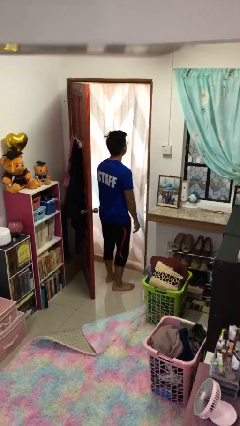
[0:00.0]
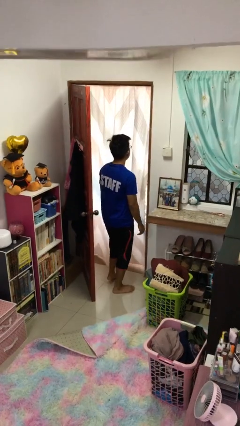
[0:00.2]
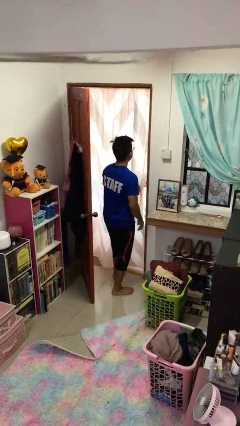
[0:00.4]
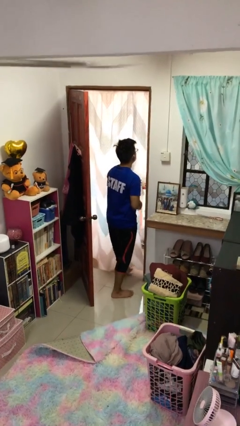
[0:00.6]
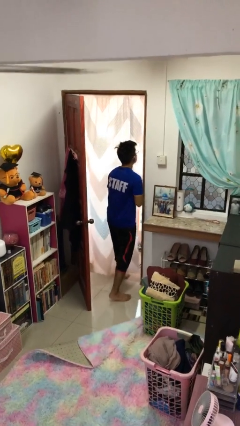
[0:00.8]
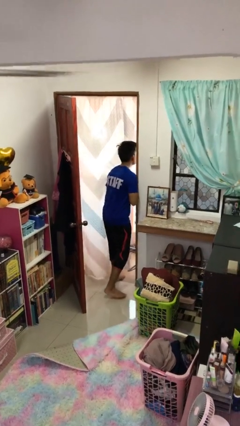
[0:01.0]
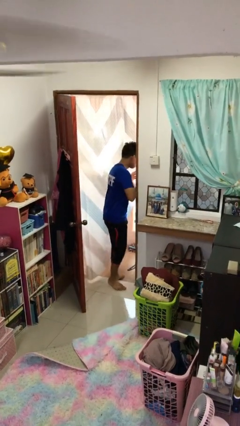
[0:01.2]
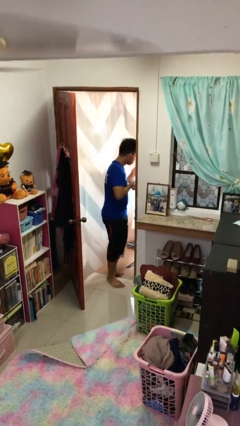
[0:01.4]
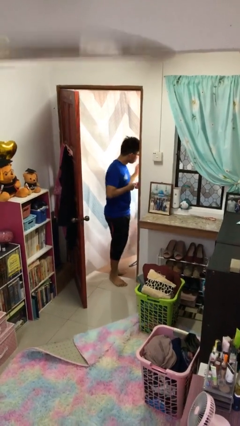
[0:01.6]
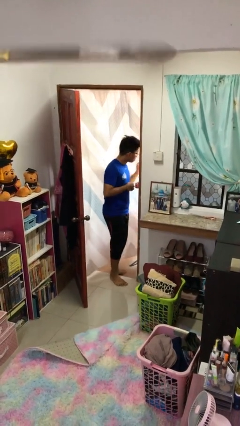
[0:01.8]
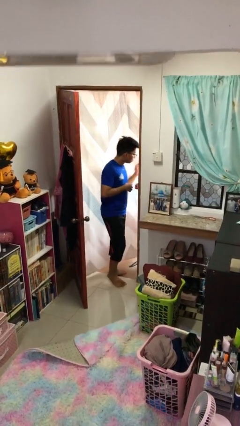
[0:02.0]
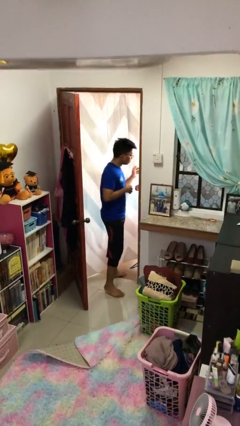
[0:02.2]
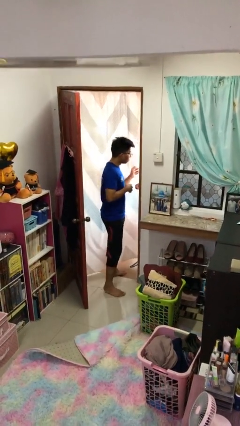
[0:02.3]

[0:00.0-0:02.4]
person bumps into wall

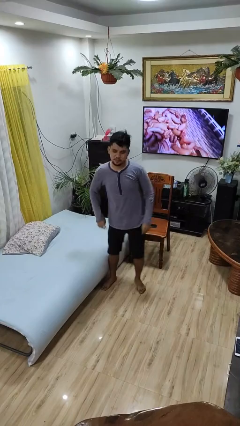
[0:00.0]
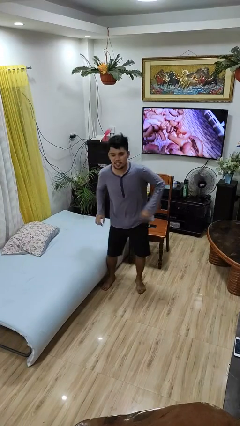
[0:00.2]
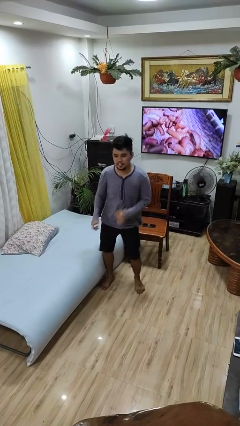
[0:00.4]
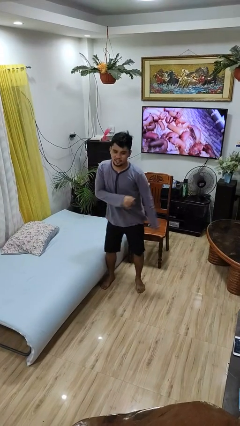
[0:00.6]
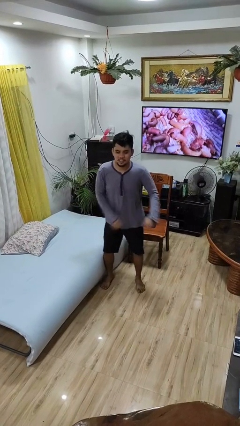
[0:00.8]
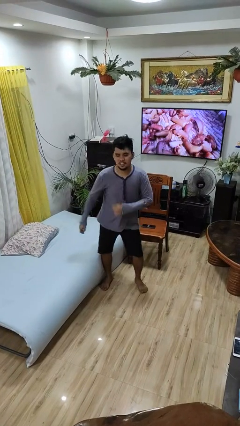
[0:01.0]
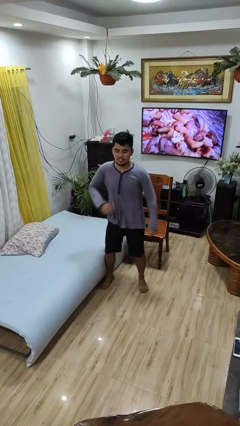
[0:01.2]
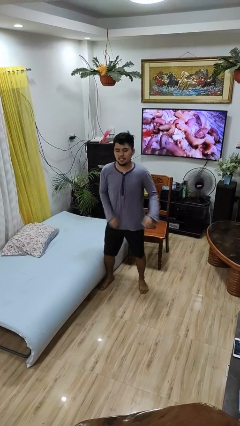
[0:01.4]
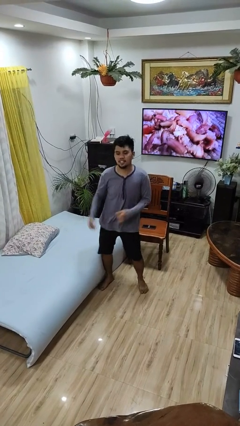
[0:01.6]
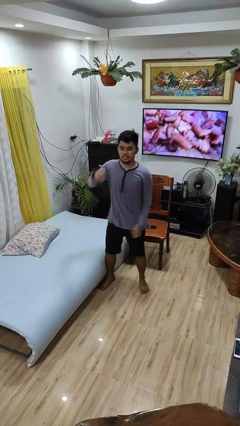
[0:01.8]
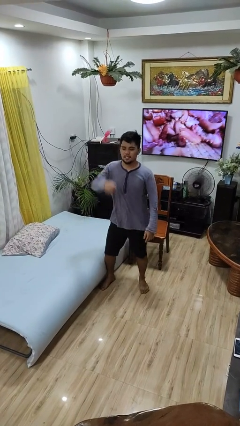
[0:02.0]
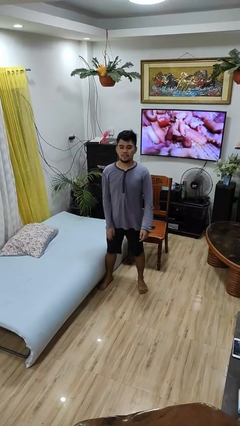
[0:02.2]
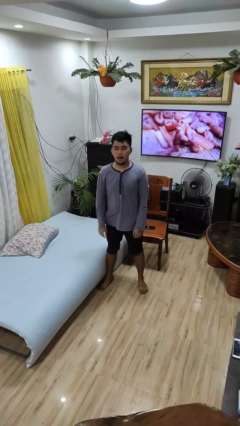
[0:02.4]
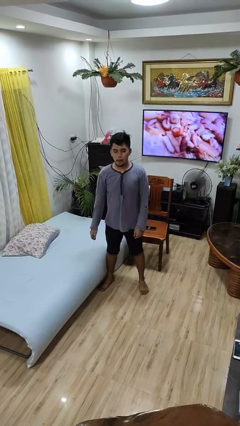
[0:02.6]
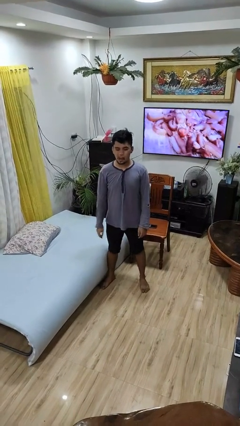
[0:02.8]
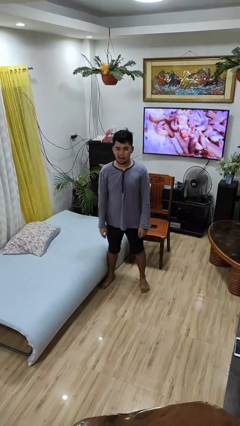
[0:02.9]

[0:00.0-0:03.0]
person dances in place

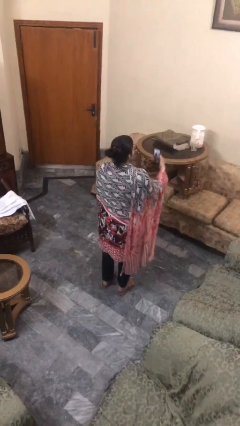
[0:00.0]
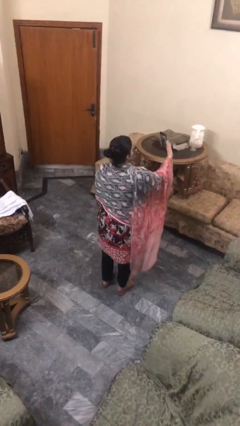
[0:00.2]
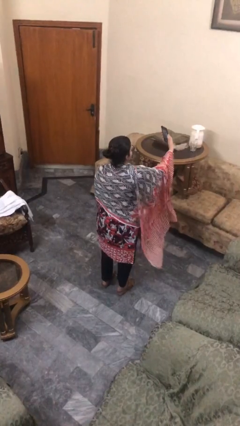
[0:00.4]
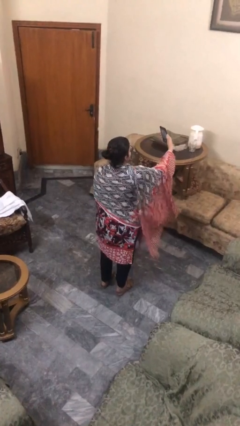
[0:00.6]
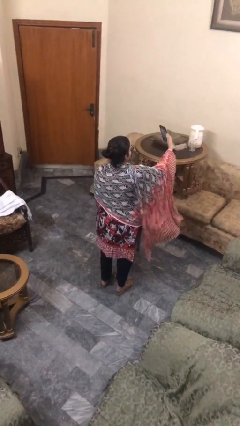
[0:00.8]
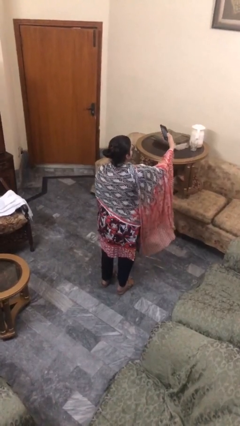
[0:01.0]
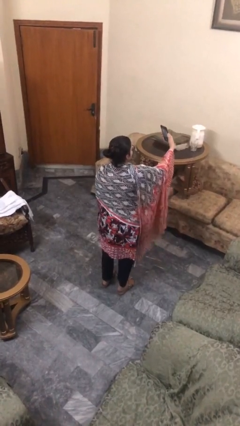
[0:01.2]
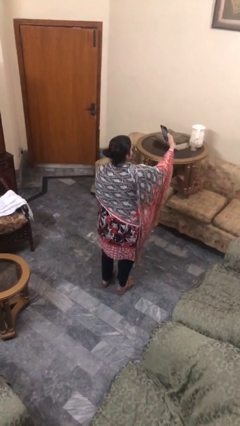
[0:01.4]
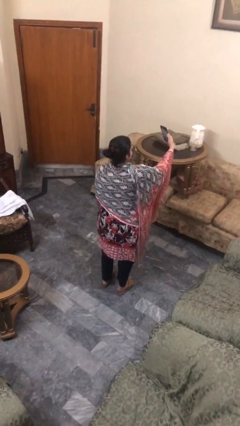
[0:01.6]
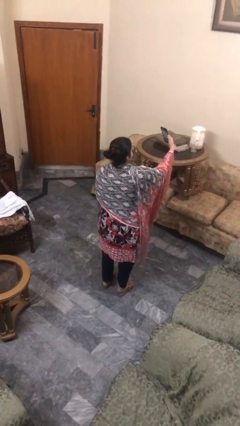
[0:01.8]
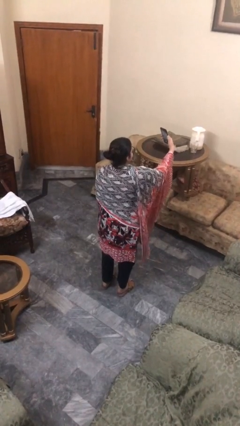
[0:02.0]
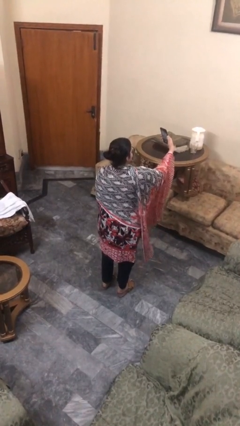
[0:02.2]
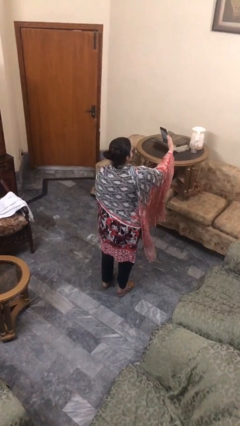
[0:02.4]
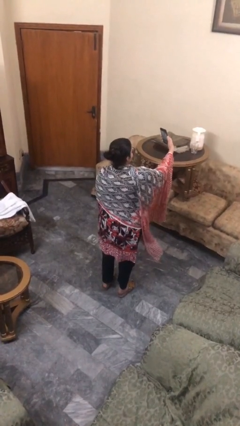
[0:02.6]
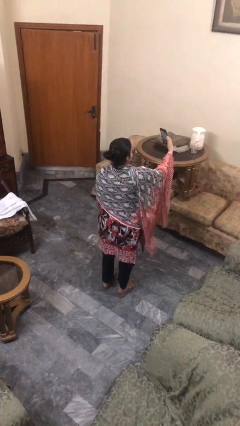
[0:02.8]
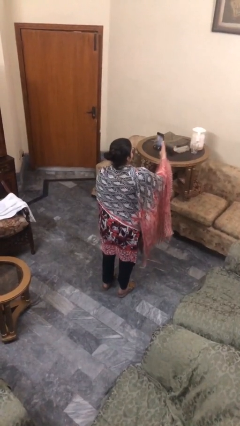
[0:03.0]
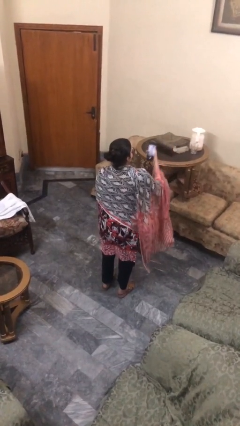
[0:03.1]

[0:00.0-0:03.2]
person takes selfie

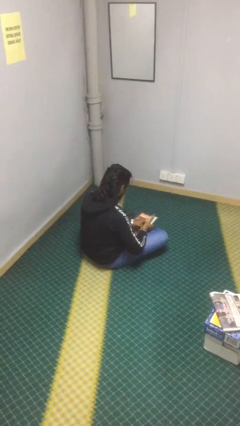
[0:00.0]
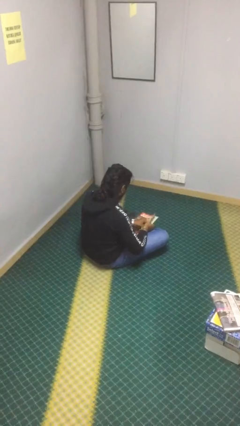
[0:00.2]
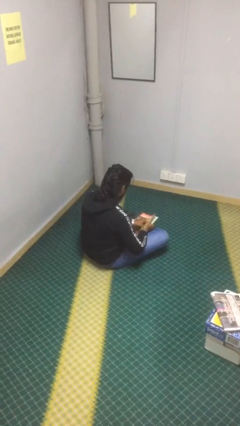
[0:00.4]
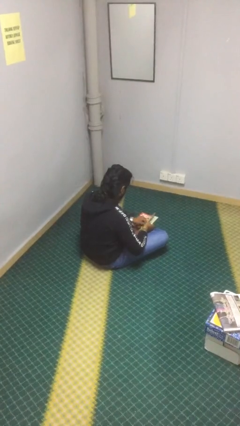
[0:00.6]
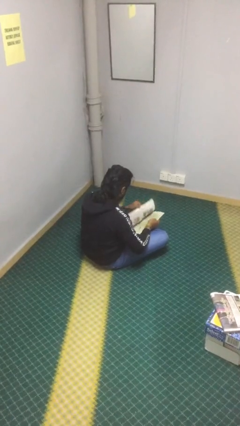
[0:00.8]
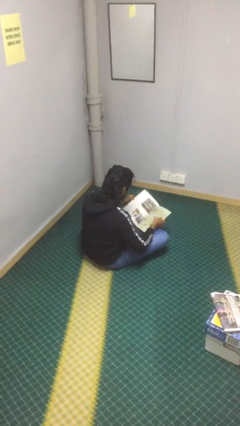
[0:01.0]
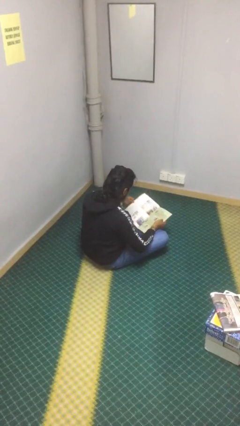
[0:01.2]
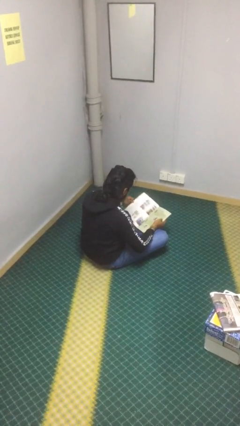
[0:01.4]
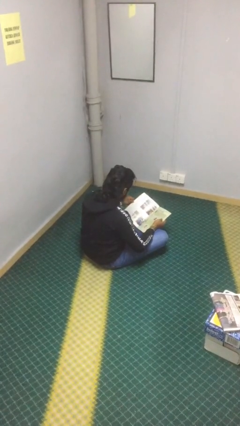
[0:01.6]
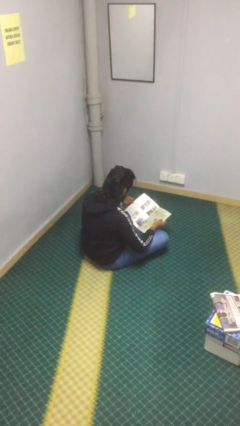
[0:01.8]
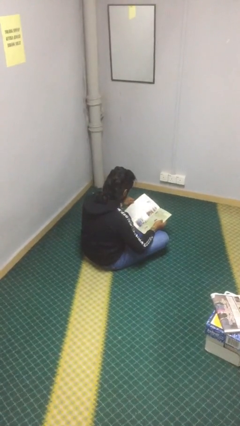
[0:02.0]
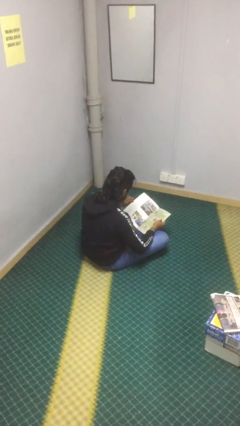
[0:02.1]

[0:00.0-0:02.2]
person reads magazine

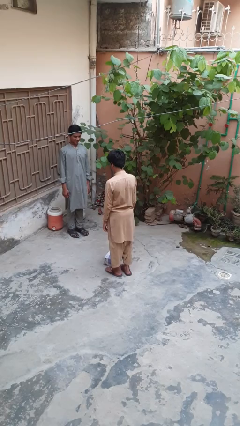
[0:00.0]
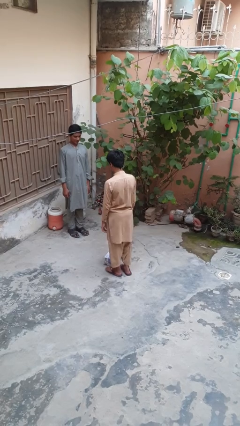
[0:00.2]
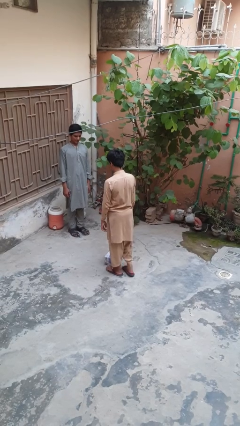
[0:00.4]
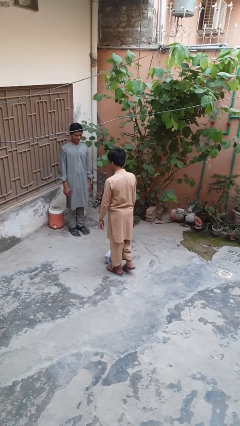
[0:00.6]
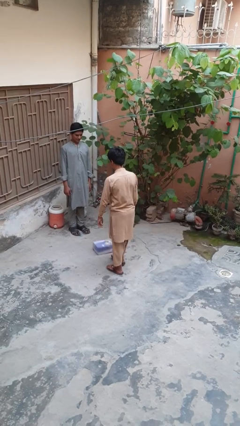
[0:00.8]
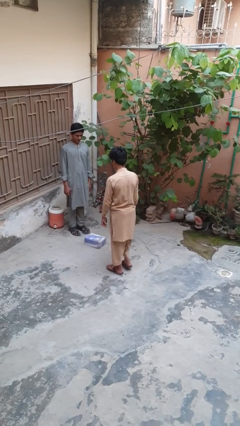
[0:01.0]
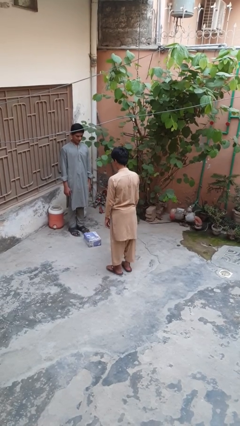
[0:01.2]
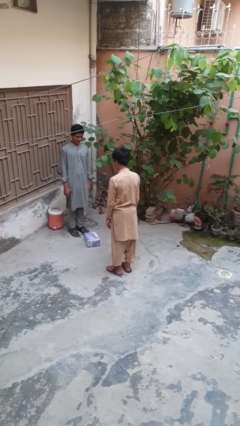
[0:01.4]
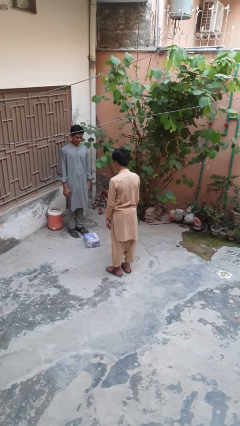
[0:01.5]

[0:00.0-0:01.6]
person kicks object to person

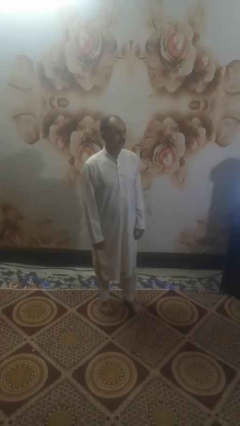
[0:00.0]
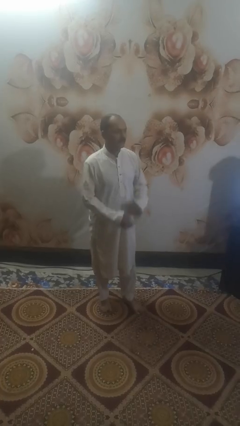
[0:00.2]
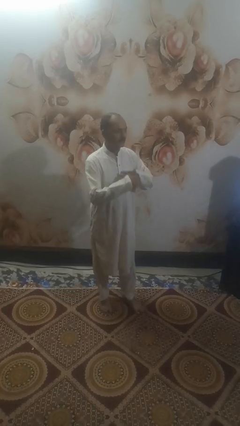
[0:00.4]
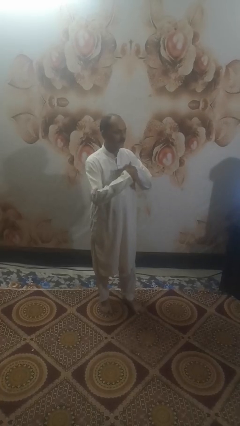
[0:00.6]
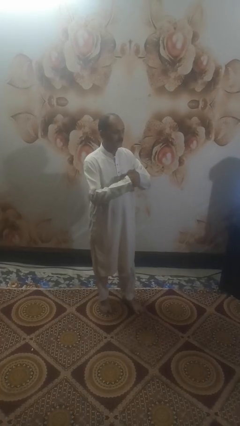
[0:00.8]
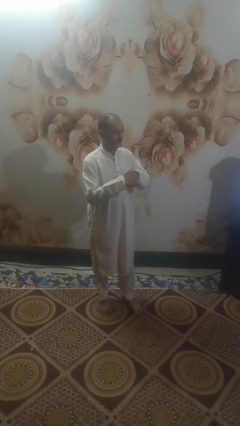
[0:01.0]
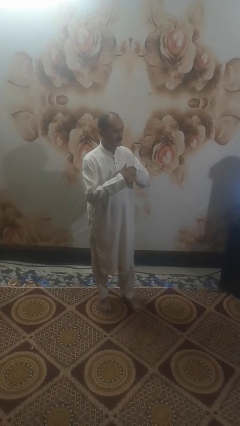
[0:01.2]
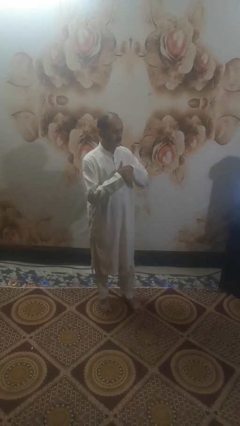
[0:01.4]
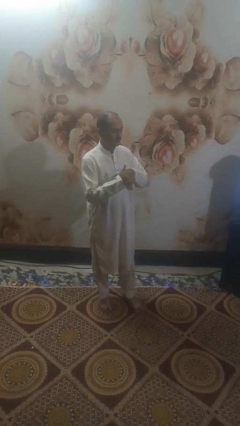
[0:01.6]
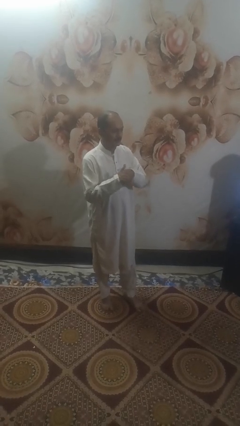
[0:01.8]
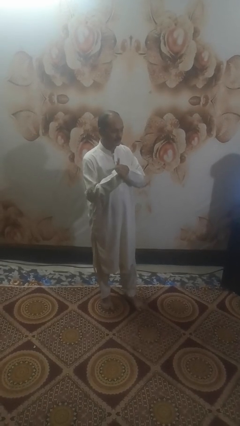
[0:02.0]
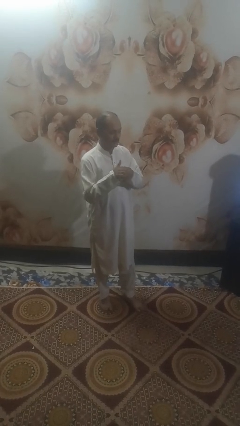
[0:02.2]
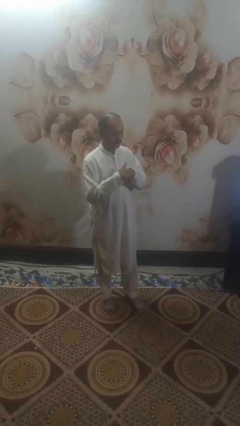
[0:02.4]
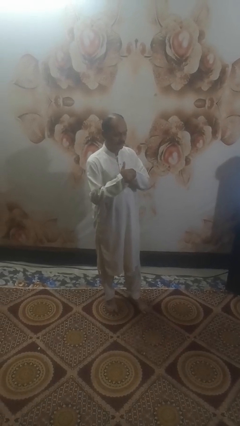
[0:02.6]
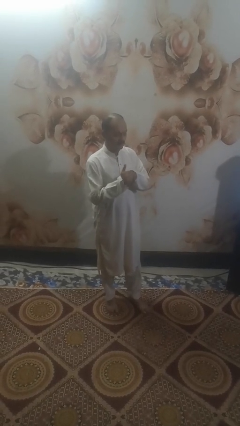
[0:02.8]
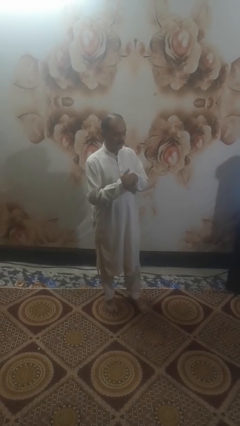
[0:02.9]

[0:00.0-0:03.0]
person cracks knuckles

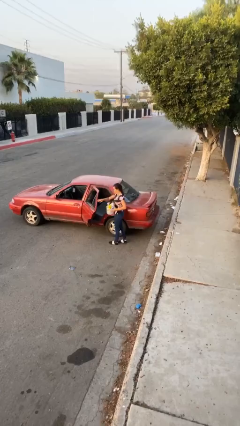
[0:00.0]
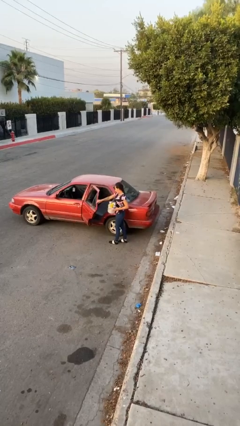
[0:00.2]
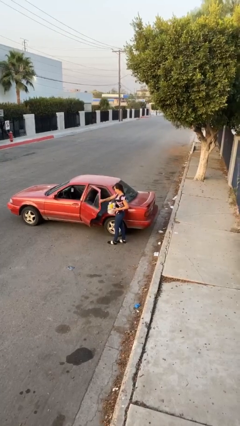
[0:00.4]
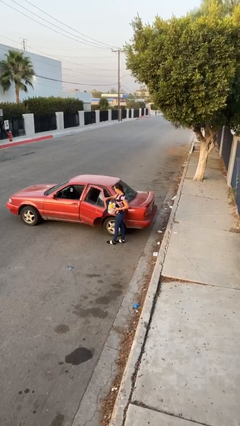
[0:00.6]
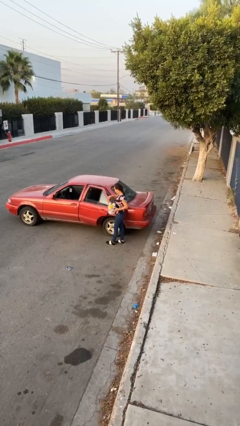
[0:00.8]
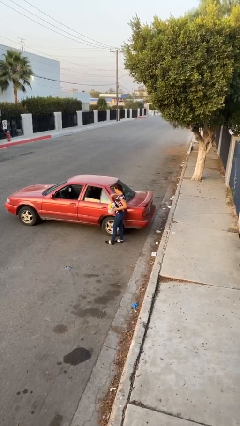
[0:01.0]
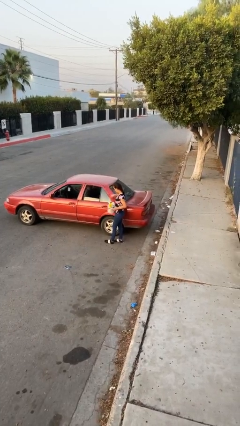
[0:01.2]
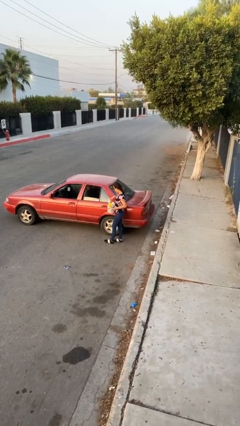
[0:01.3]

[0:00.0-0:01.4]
person closes car door
